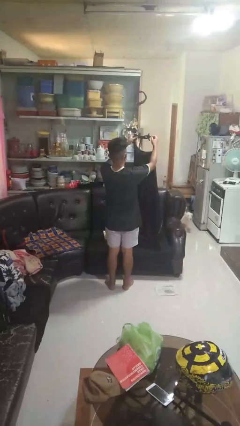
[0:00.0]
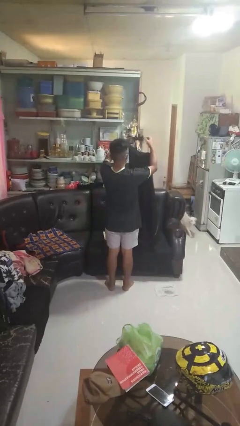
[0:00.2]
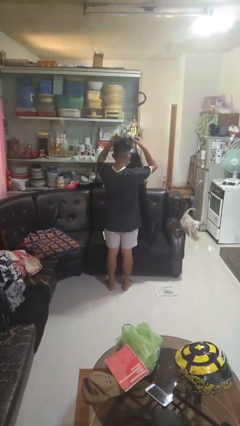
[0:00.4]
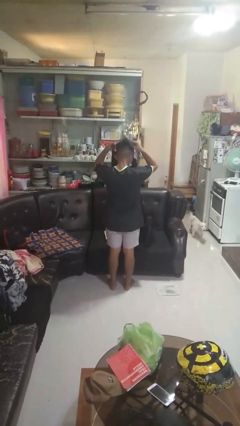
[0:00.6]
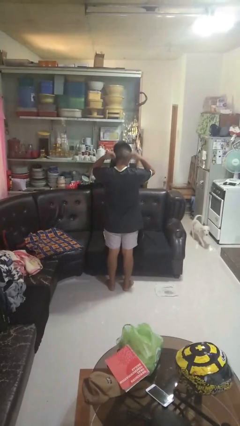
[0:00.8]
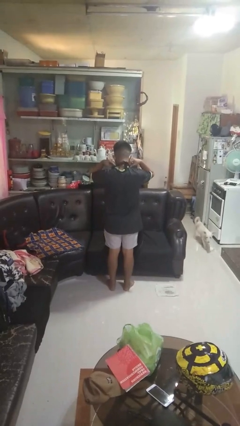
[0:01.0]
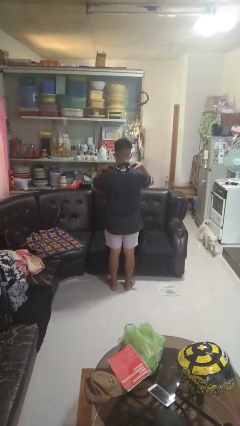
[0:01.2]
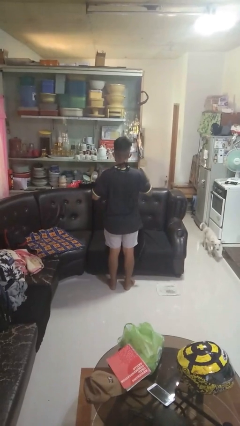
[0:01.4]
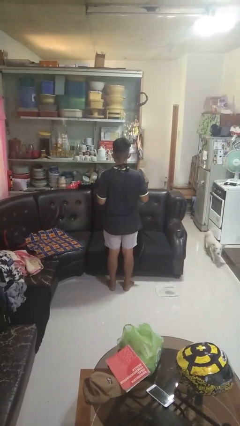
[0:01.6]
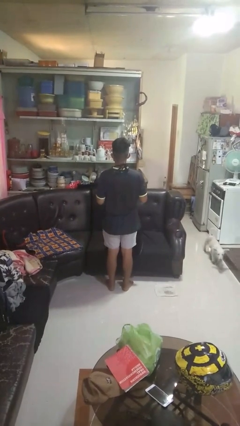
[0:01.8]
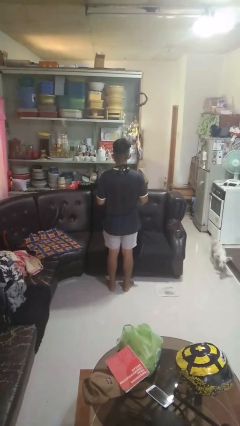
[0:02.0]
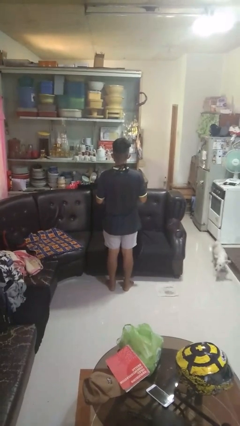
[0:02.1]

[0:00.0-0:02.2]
person puts on apron

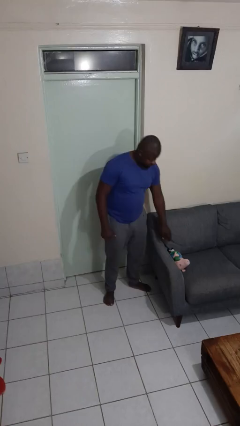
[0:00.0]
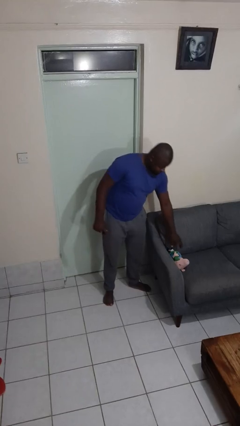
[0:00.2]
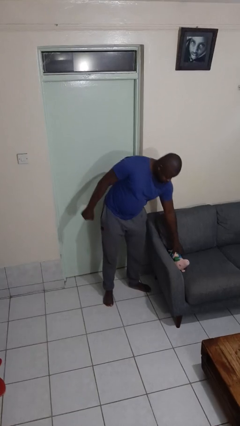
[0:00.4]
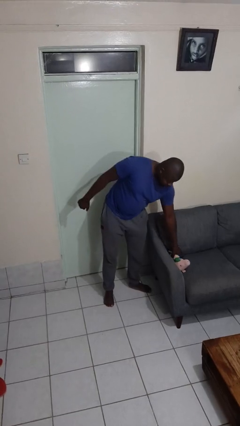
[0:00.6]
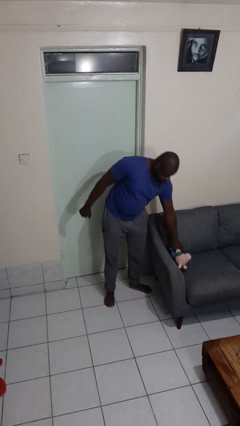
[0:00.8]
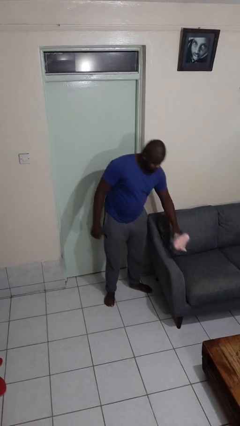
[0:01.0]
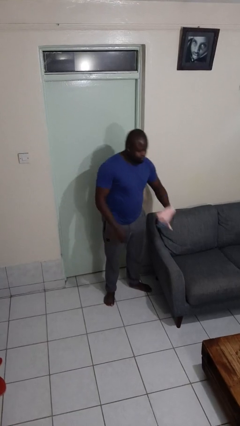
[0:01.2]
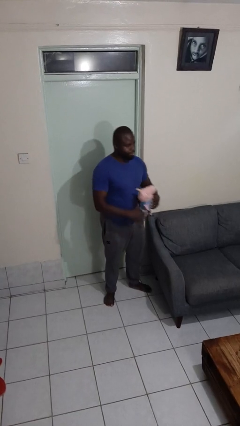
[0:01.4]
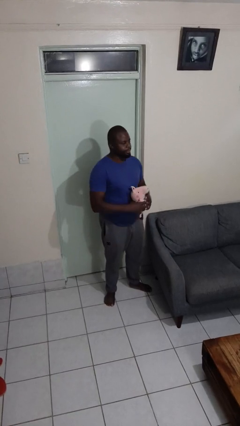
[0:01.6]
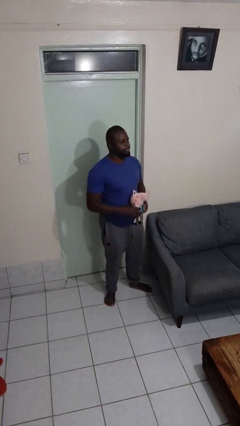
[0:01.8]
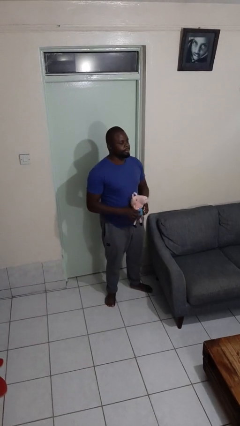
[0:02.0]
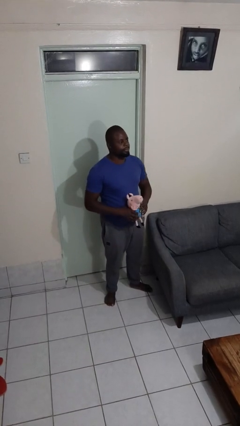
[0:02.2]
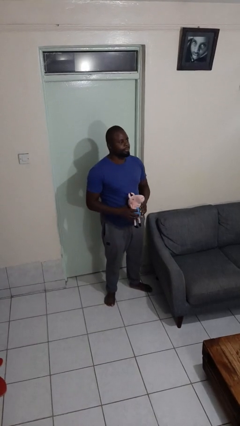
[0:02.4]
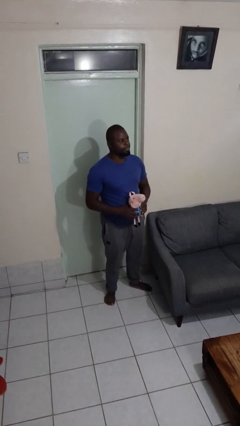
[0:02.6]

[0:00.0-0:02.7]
person picks up object from couch

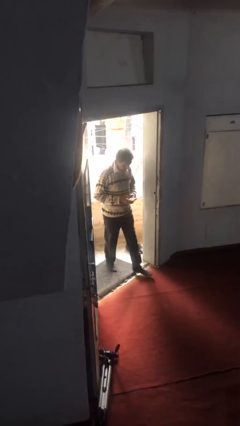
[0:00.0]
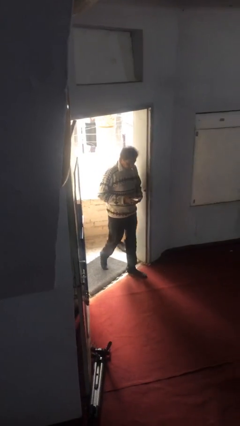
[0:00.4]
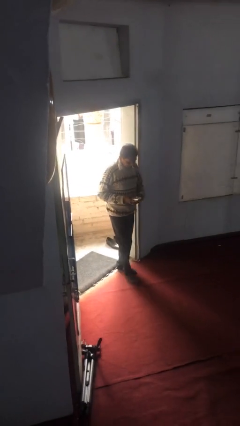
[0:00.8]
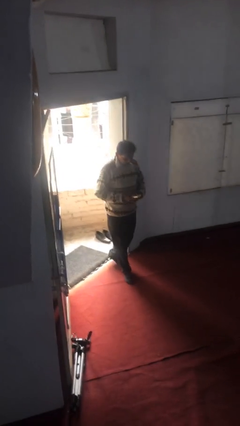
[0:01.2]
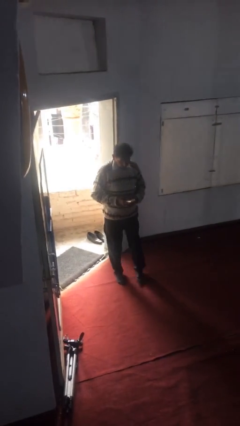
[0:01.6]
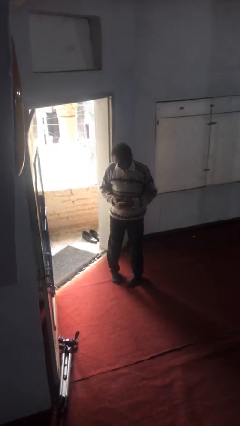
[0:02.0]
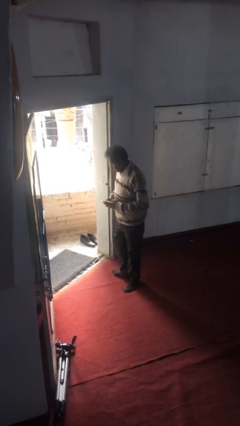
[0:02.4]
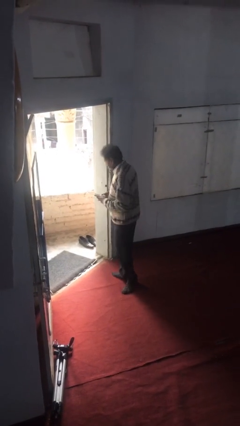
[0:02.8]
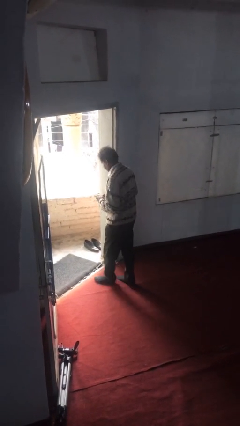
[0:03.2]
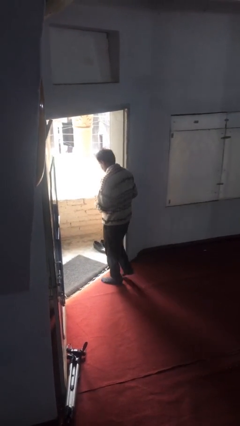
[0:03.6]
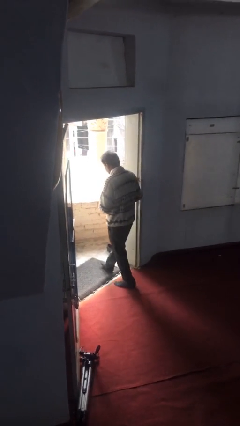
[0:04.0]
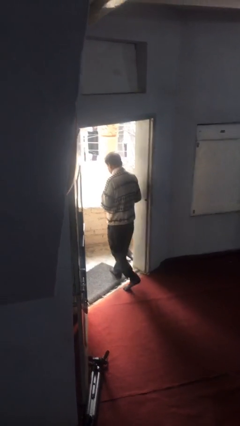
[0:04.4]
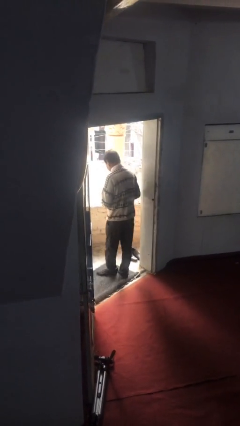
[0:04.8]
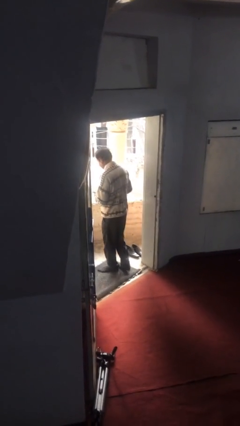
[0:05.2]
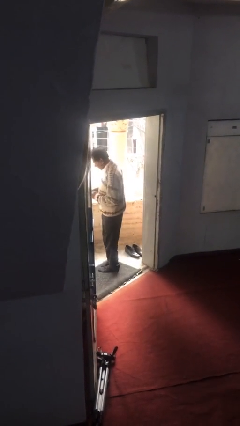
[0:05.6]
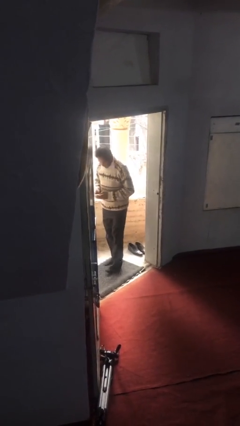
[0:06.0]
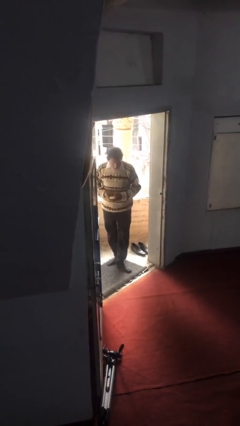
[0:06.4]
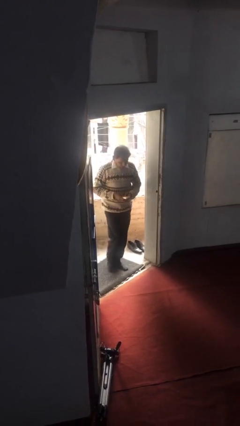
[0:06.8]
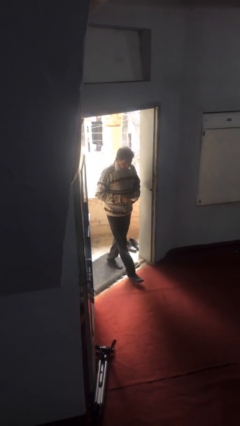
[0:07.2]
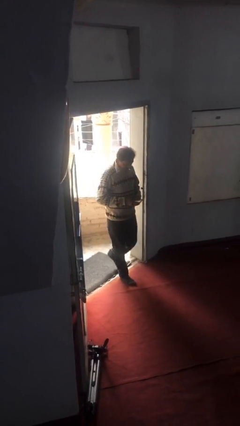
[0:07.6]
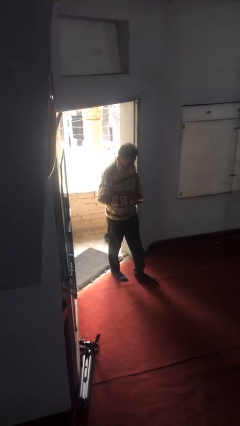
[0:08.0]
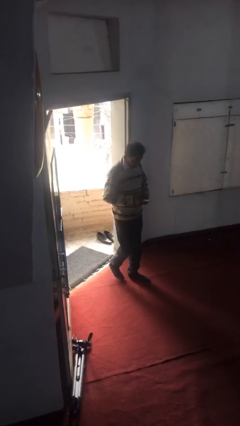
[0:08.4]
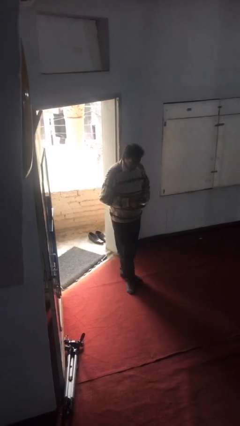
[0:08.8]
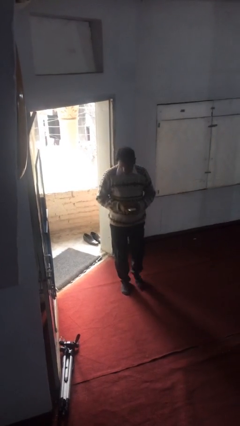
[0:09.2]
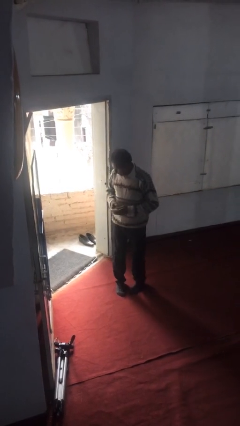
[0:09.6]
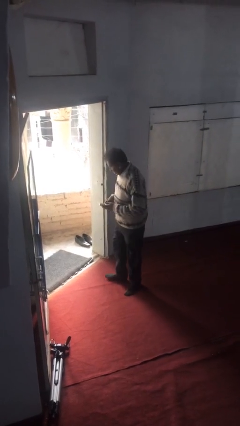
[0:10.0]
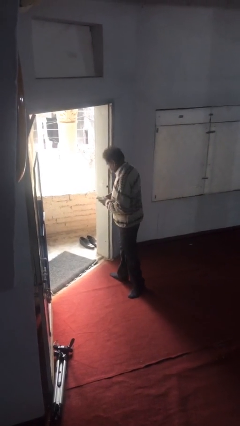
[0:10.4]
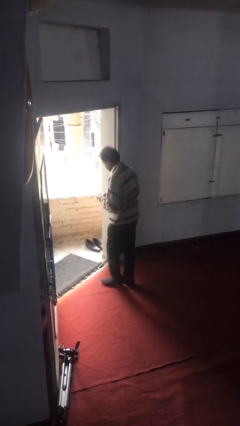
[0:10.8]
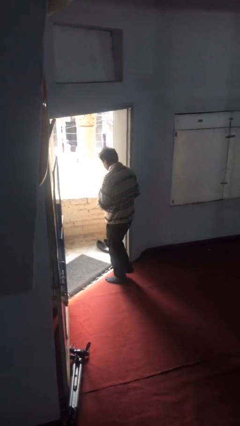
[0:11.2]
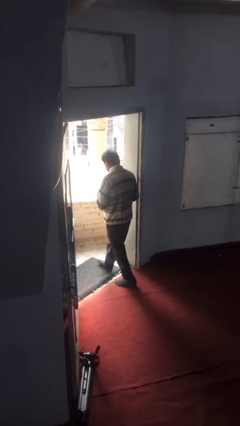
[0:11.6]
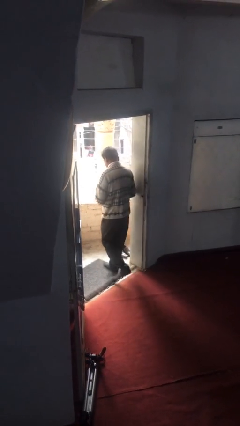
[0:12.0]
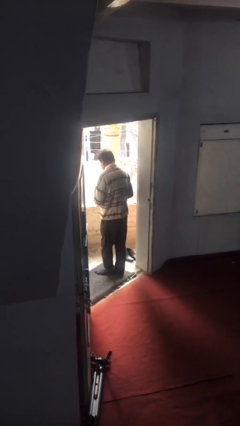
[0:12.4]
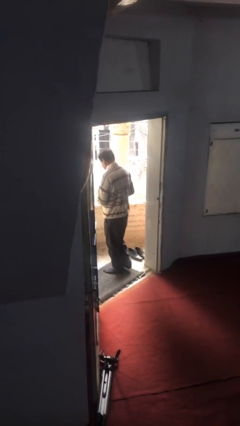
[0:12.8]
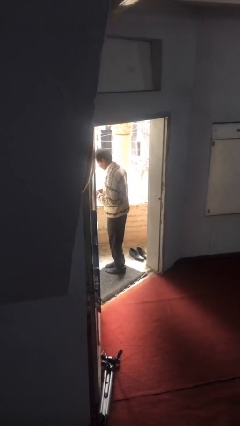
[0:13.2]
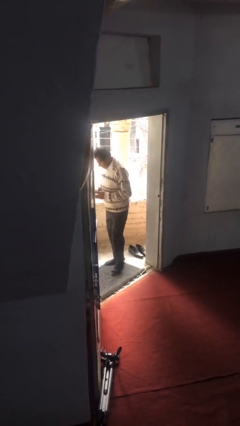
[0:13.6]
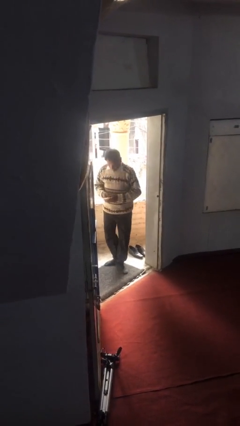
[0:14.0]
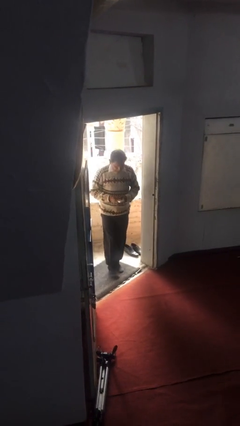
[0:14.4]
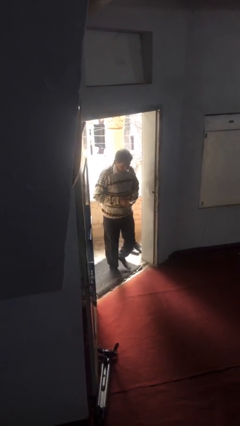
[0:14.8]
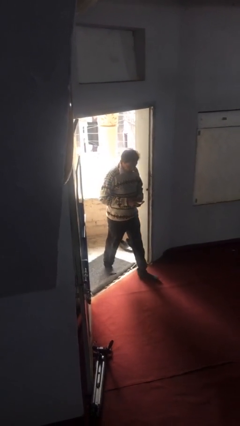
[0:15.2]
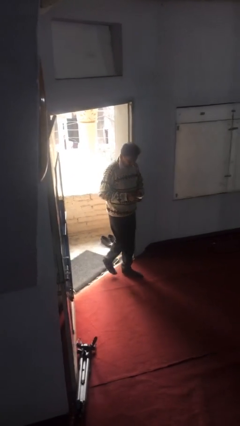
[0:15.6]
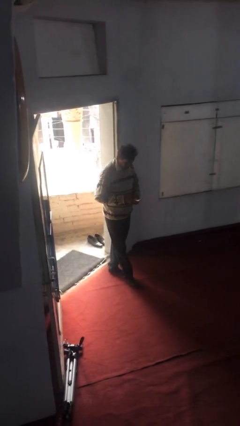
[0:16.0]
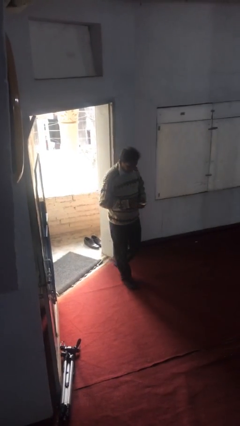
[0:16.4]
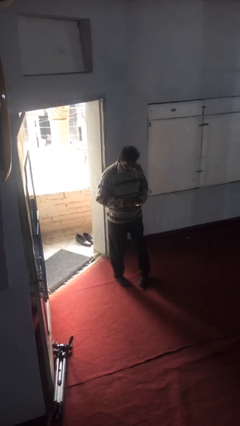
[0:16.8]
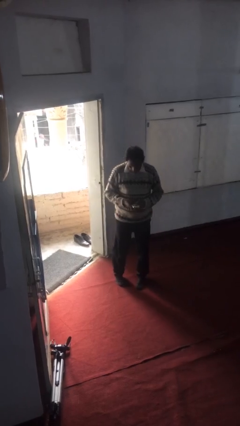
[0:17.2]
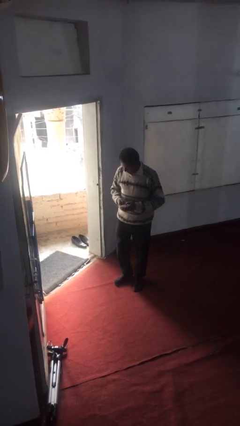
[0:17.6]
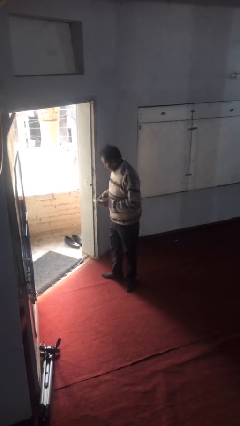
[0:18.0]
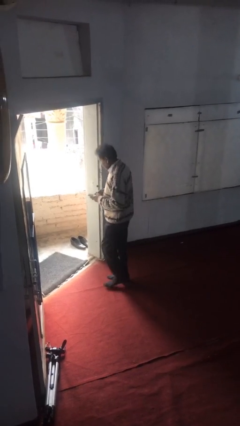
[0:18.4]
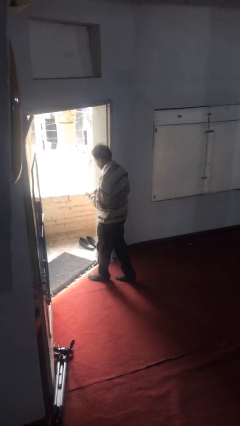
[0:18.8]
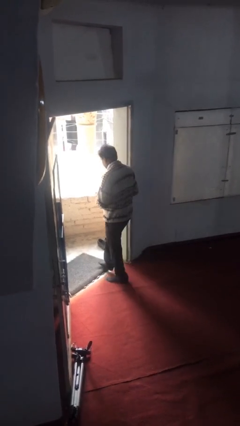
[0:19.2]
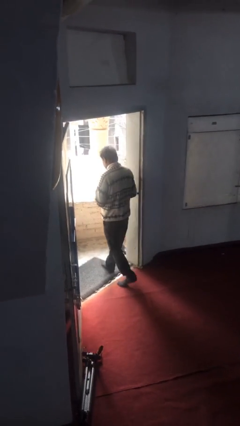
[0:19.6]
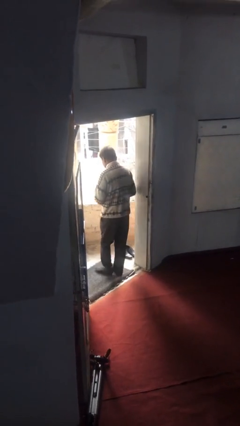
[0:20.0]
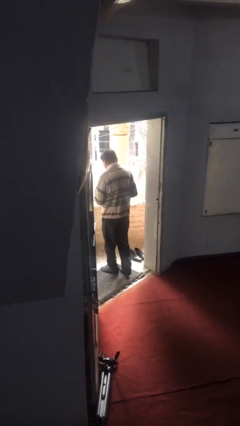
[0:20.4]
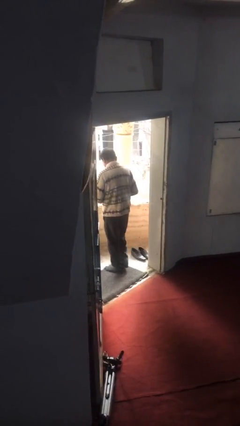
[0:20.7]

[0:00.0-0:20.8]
person texts on phone

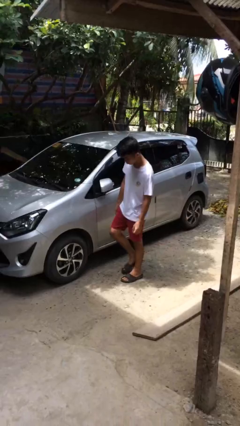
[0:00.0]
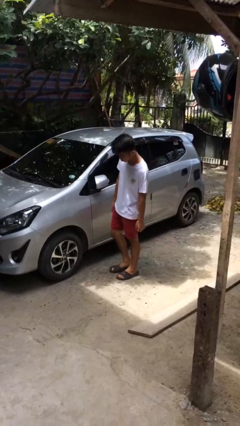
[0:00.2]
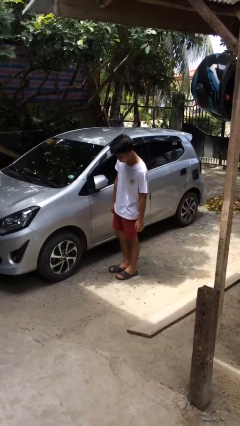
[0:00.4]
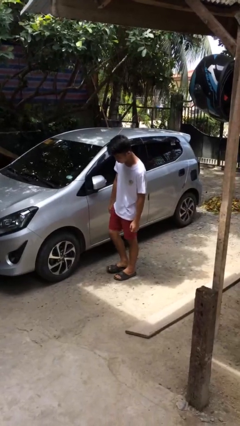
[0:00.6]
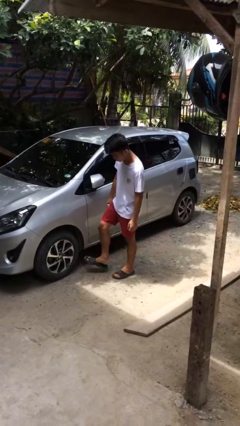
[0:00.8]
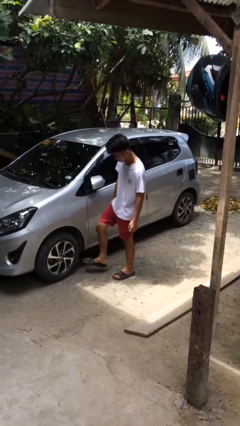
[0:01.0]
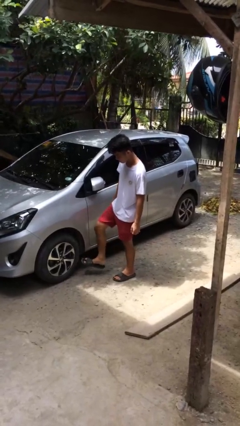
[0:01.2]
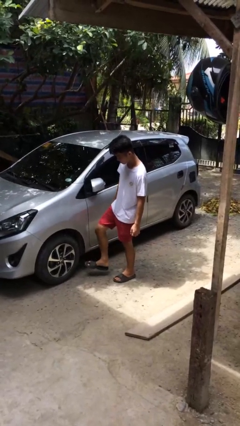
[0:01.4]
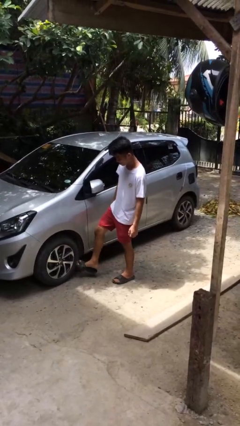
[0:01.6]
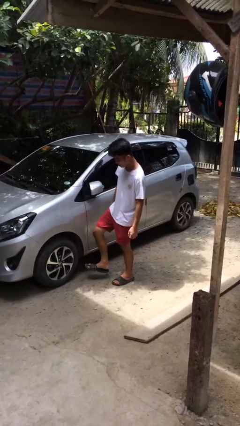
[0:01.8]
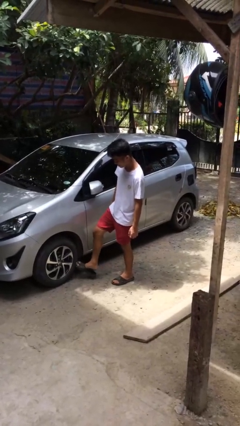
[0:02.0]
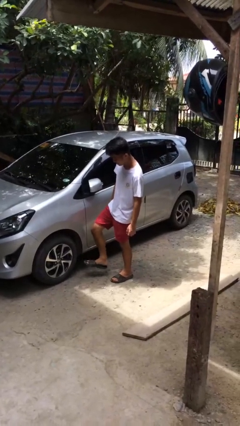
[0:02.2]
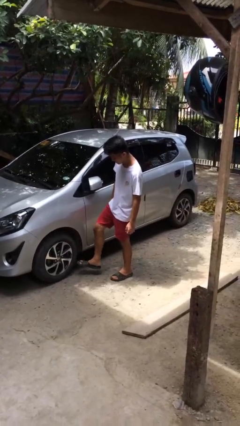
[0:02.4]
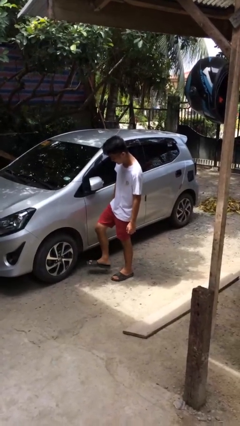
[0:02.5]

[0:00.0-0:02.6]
person kicks car tires
